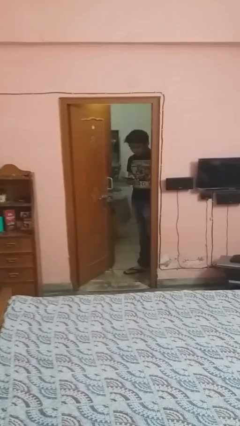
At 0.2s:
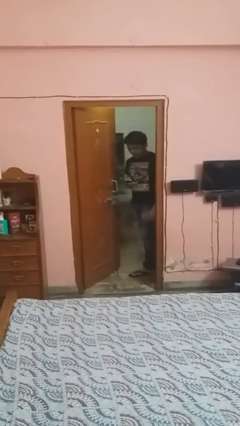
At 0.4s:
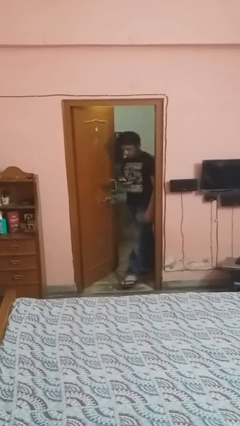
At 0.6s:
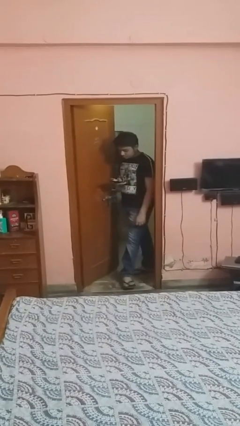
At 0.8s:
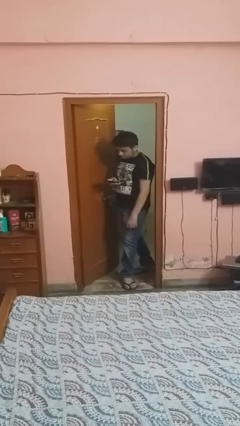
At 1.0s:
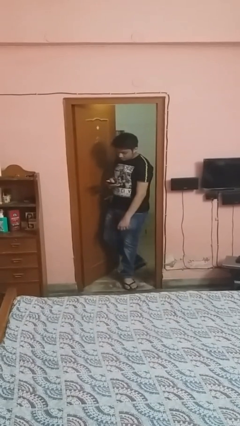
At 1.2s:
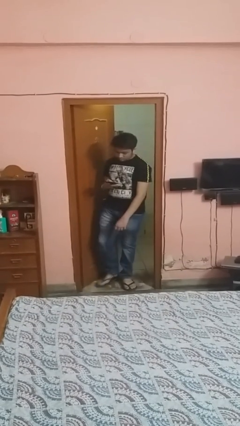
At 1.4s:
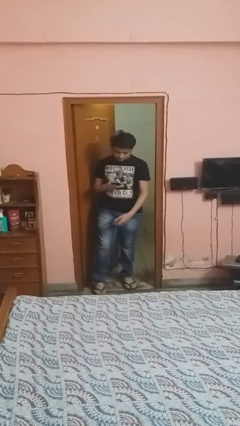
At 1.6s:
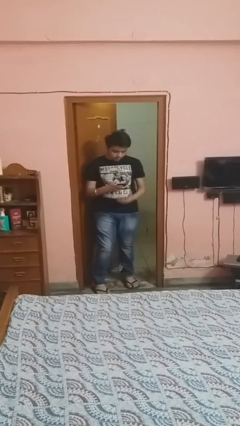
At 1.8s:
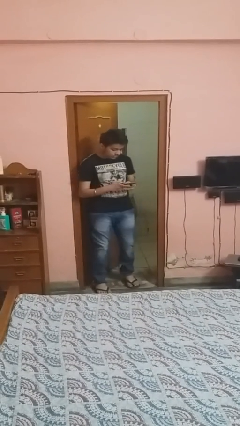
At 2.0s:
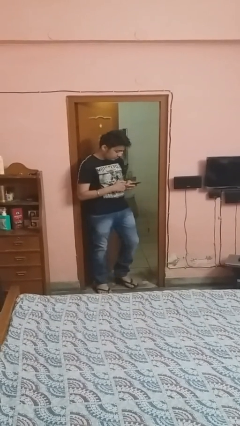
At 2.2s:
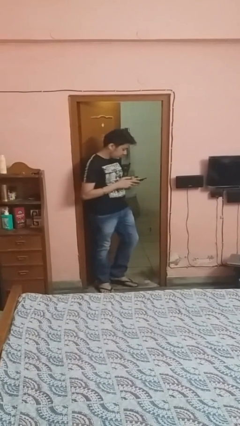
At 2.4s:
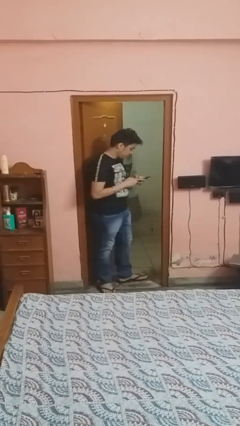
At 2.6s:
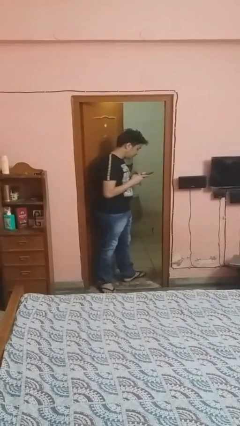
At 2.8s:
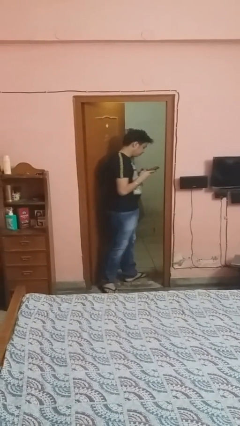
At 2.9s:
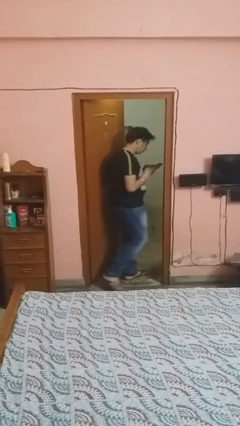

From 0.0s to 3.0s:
person enters scene through structure

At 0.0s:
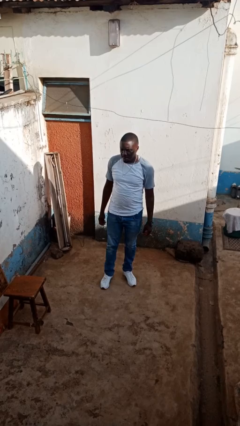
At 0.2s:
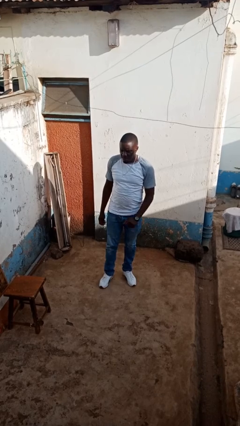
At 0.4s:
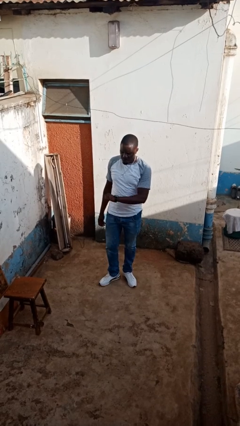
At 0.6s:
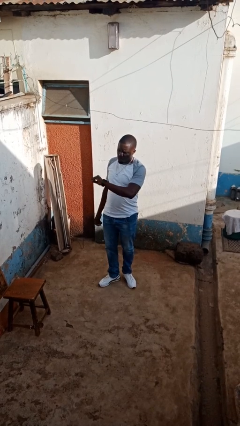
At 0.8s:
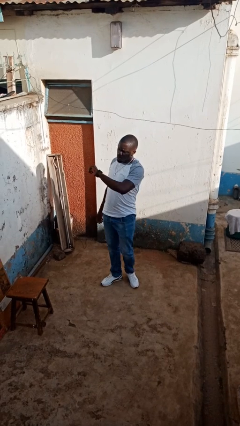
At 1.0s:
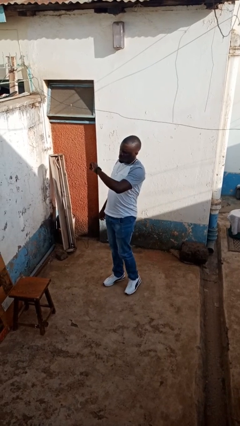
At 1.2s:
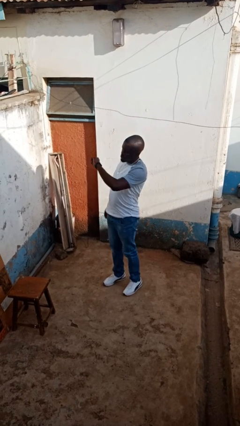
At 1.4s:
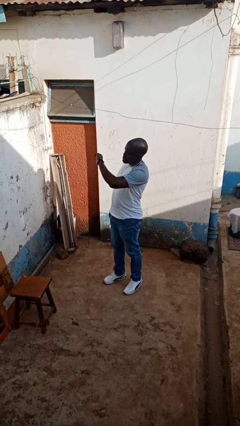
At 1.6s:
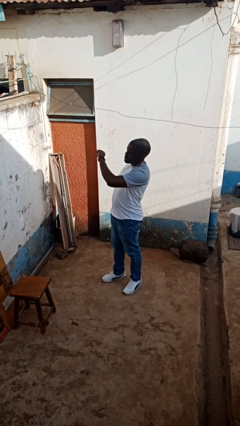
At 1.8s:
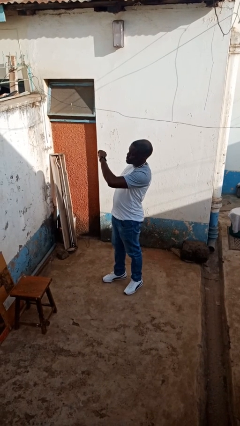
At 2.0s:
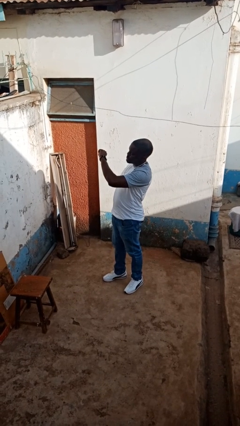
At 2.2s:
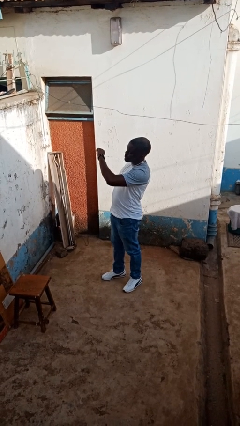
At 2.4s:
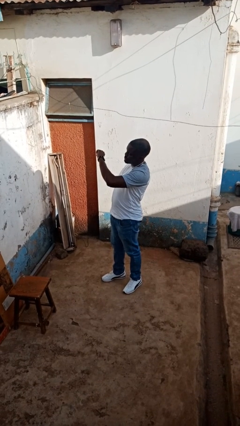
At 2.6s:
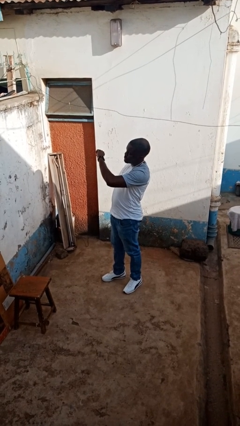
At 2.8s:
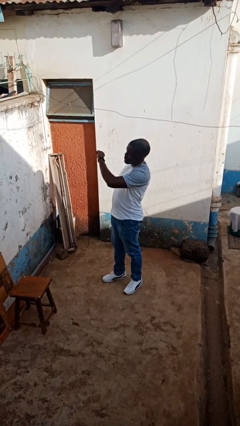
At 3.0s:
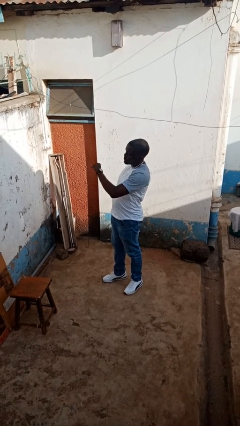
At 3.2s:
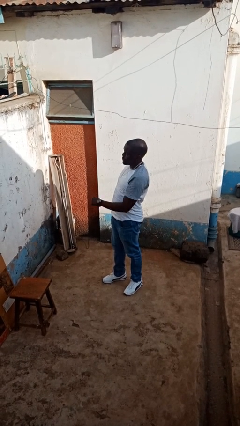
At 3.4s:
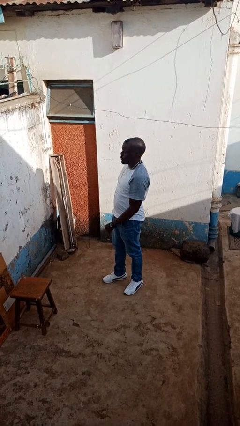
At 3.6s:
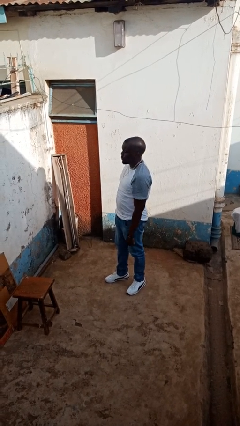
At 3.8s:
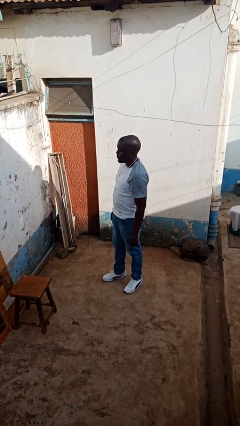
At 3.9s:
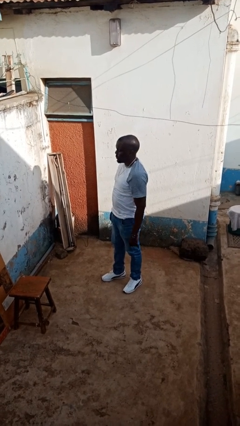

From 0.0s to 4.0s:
person looks at wristwatch

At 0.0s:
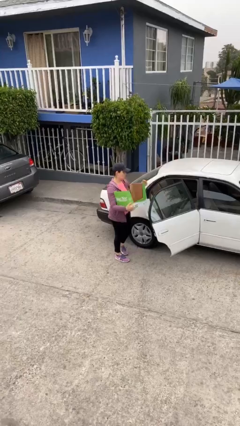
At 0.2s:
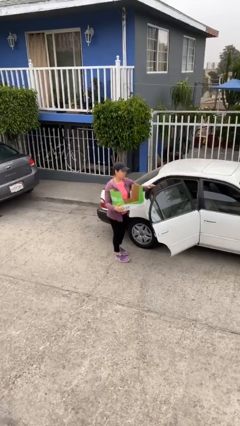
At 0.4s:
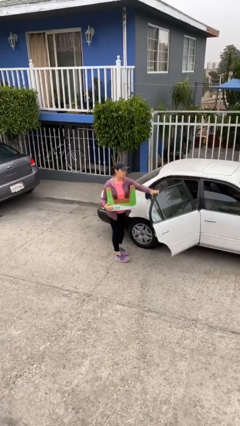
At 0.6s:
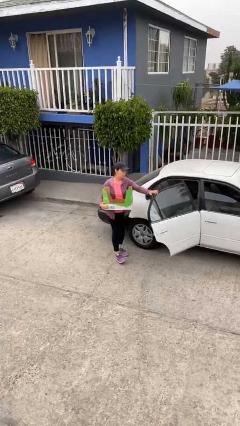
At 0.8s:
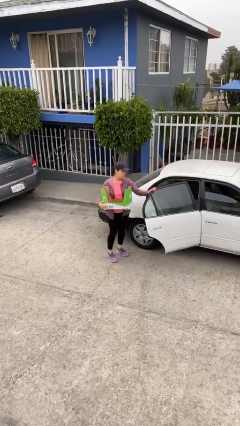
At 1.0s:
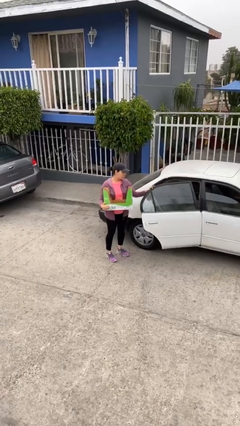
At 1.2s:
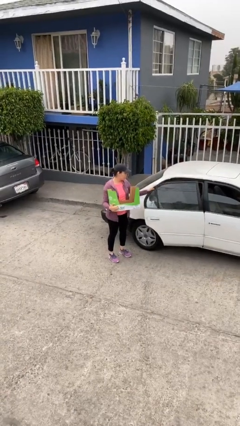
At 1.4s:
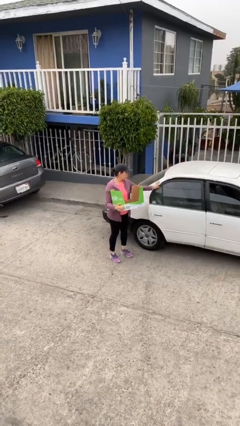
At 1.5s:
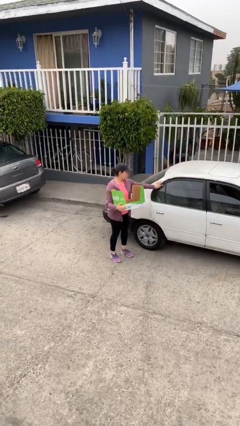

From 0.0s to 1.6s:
person closes car door

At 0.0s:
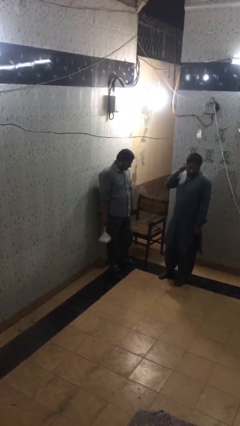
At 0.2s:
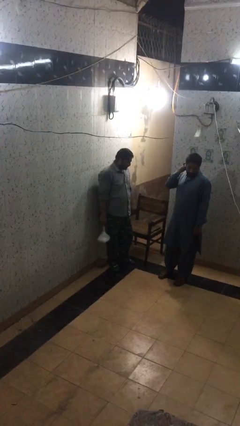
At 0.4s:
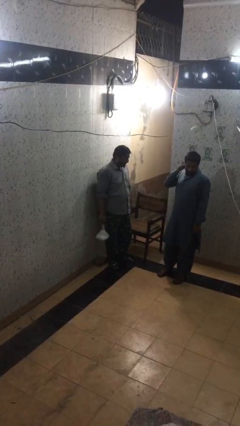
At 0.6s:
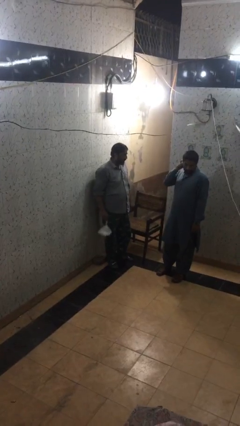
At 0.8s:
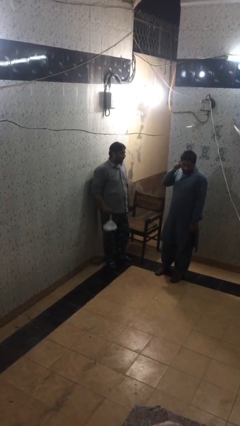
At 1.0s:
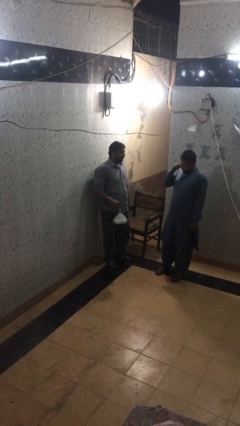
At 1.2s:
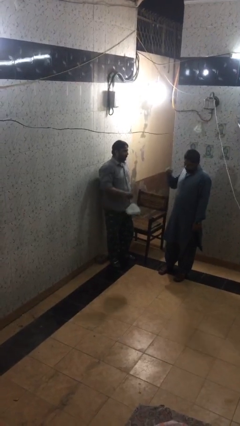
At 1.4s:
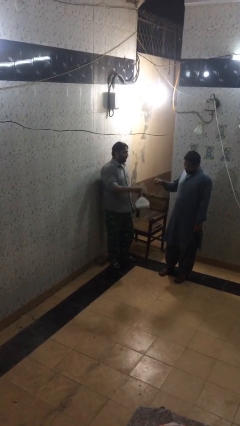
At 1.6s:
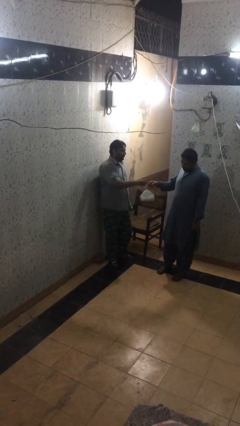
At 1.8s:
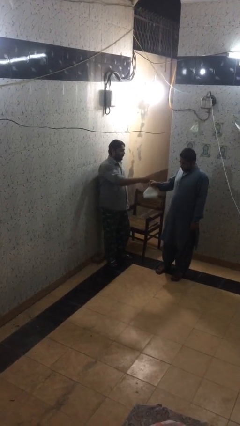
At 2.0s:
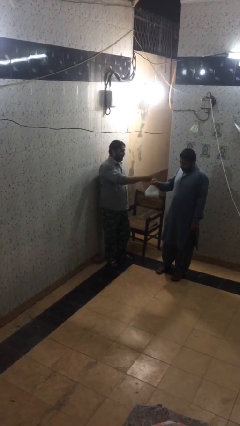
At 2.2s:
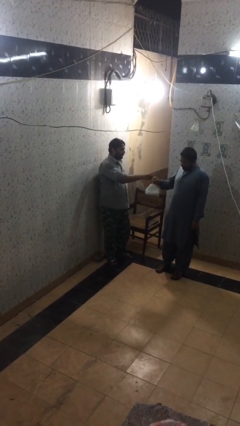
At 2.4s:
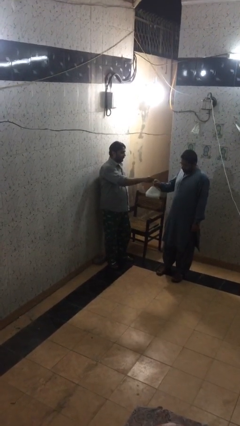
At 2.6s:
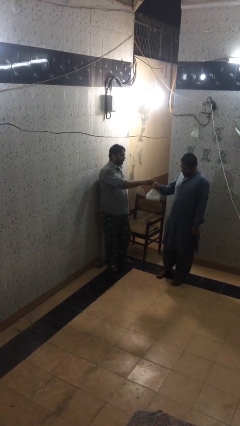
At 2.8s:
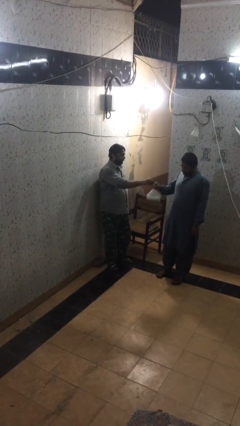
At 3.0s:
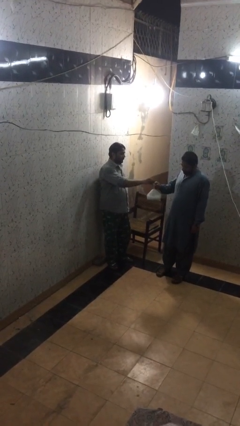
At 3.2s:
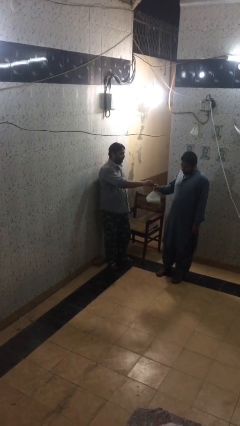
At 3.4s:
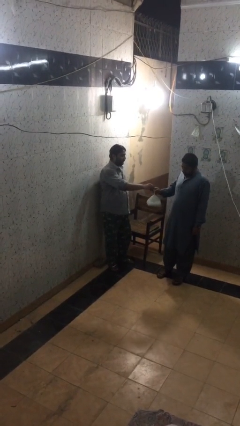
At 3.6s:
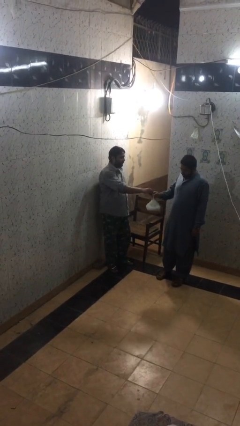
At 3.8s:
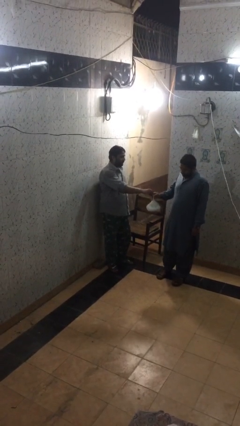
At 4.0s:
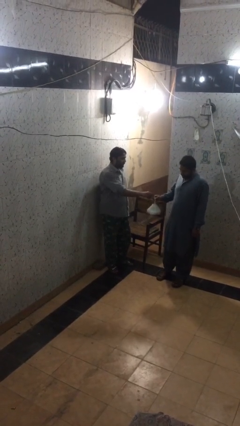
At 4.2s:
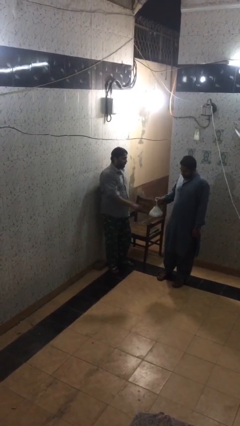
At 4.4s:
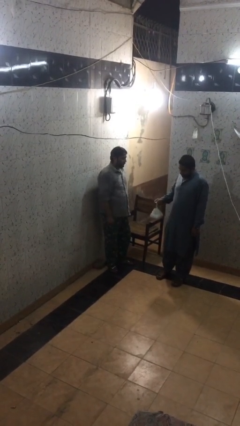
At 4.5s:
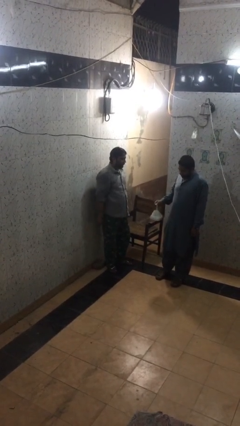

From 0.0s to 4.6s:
person transfers object to person

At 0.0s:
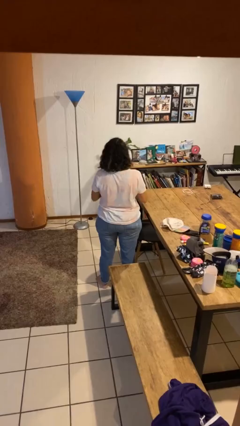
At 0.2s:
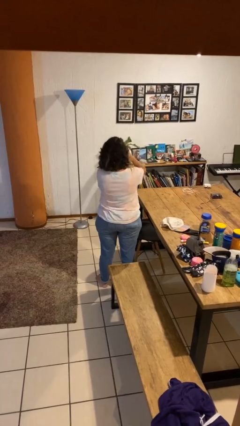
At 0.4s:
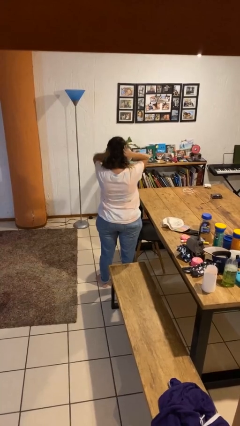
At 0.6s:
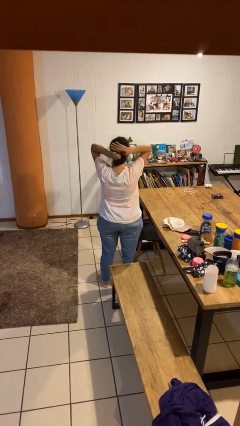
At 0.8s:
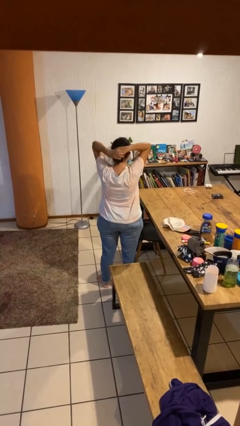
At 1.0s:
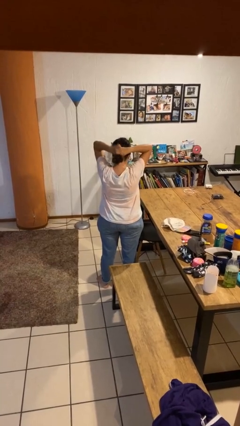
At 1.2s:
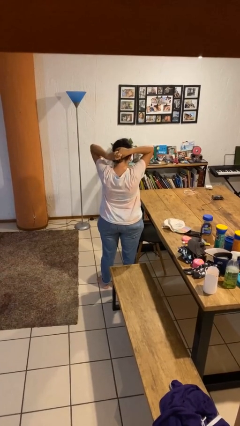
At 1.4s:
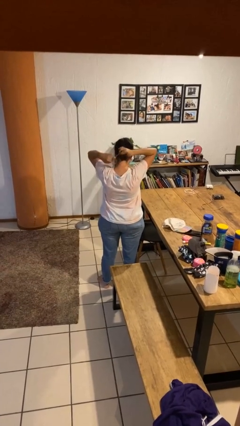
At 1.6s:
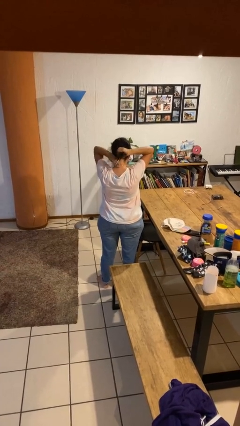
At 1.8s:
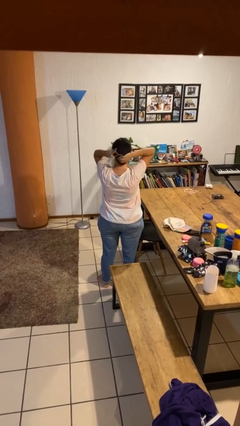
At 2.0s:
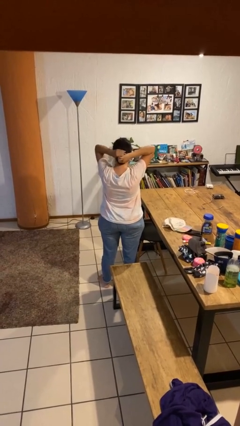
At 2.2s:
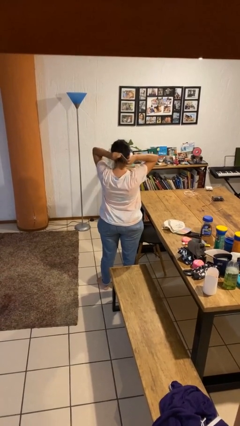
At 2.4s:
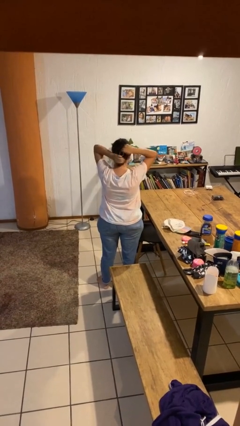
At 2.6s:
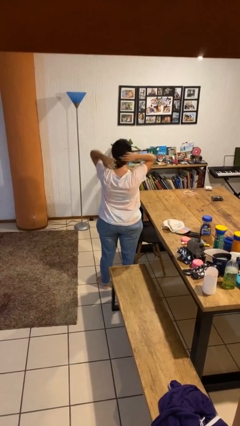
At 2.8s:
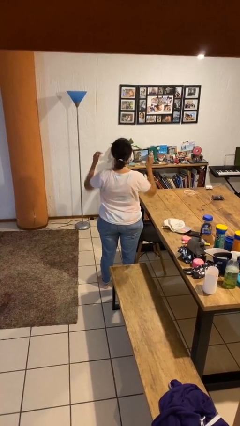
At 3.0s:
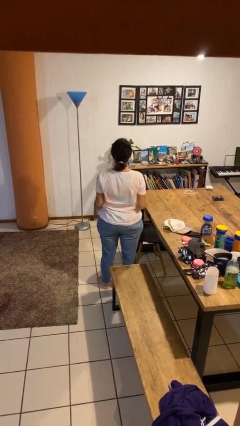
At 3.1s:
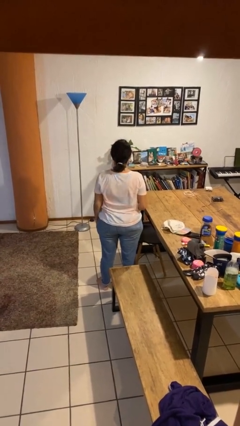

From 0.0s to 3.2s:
person puts hair in ponytail

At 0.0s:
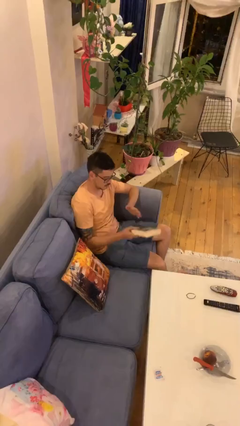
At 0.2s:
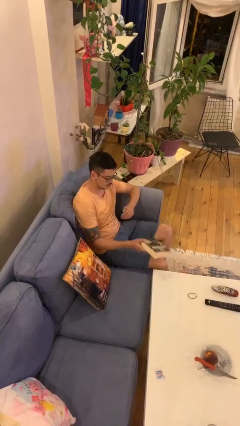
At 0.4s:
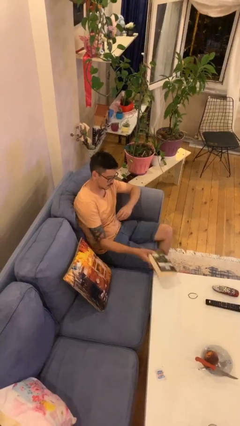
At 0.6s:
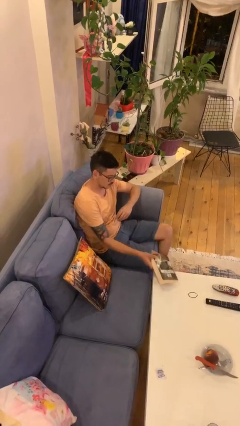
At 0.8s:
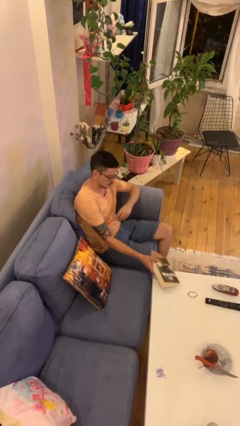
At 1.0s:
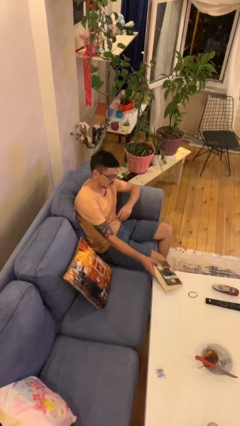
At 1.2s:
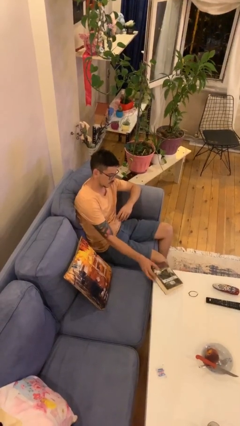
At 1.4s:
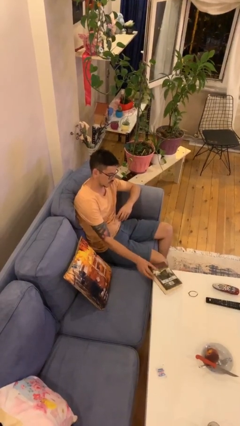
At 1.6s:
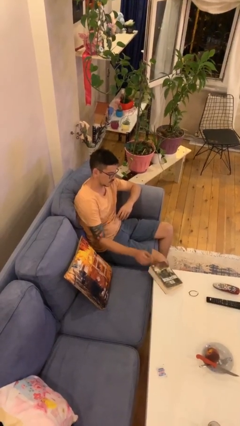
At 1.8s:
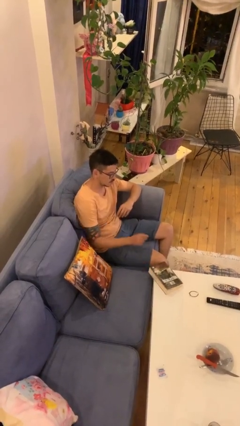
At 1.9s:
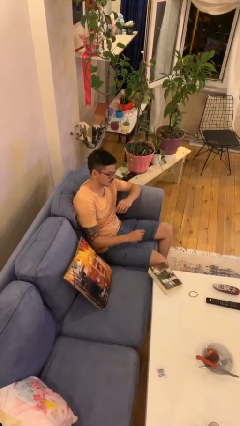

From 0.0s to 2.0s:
person puts down object on table
